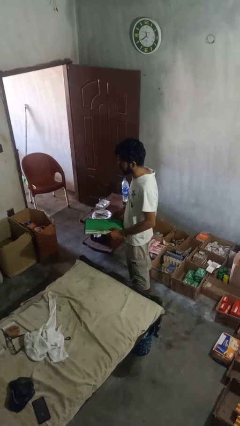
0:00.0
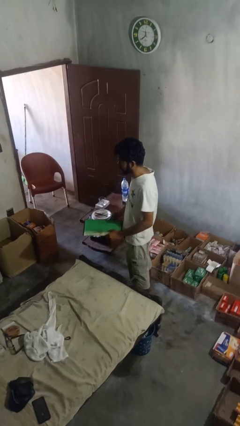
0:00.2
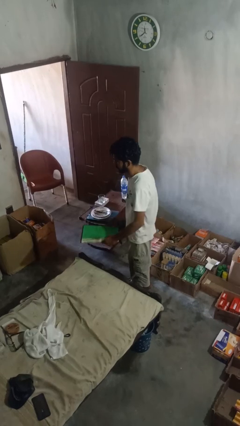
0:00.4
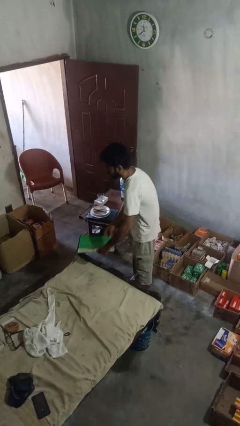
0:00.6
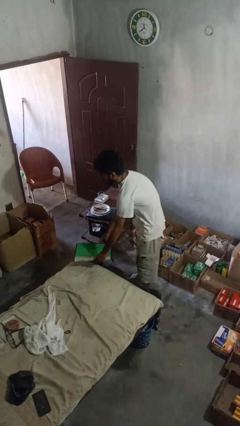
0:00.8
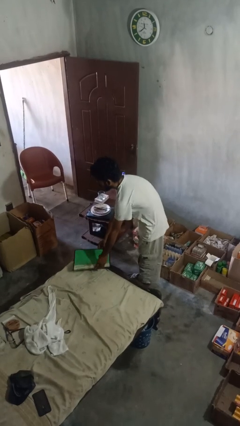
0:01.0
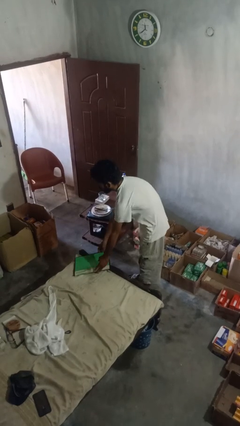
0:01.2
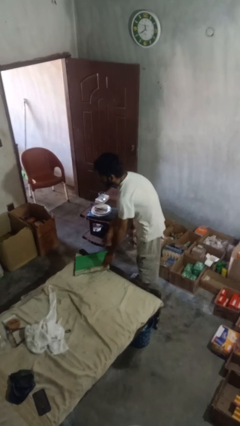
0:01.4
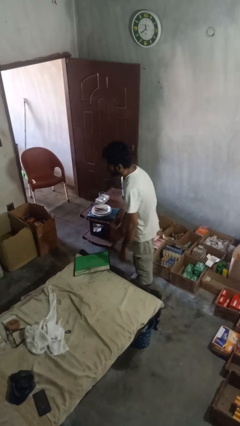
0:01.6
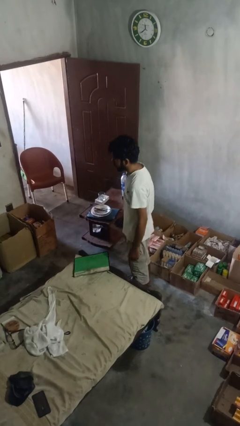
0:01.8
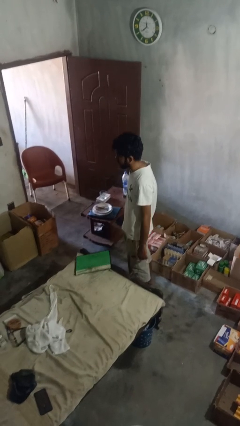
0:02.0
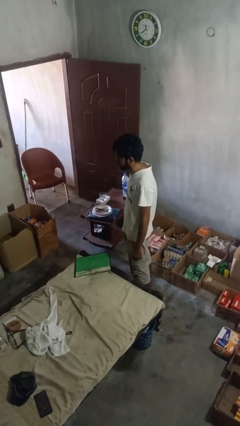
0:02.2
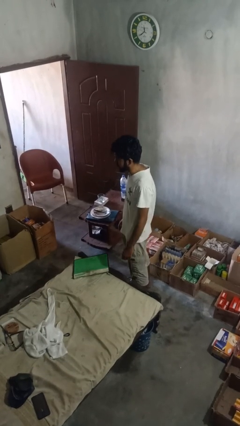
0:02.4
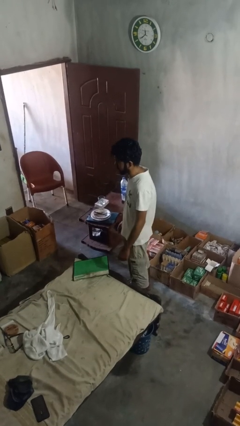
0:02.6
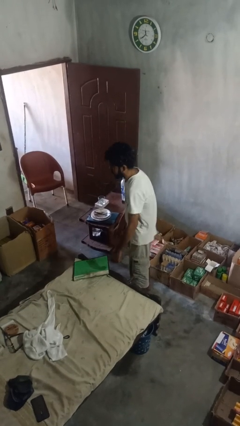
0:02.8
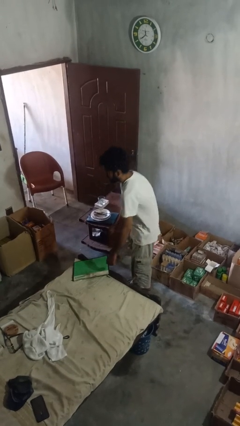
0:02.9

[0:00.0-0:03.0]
person picks up object from bed

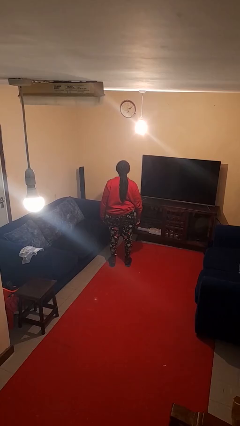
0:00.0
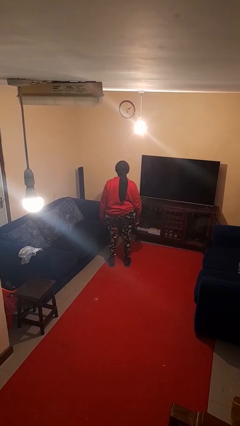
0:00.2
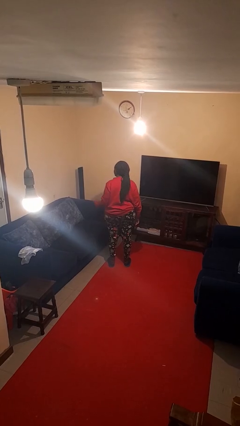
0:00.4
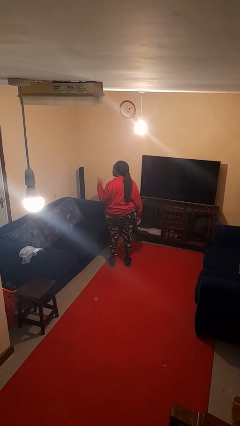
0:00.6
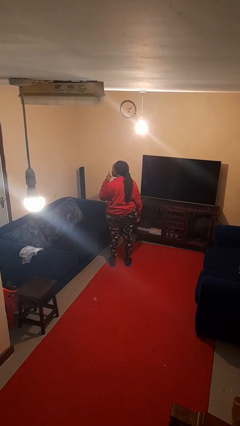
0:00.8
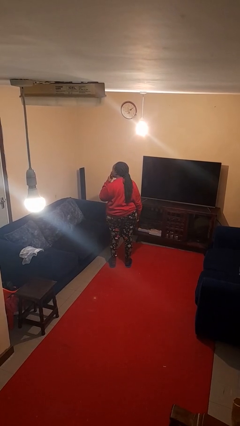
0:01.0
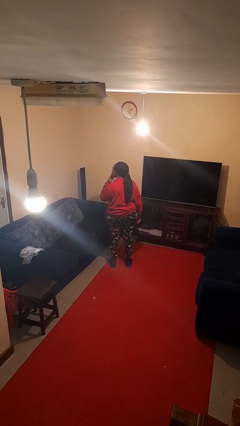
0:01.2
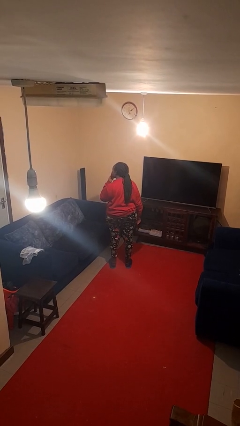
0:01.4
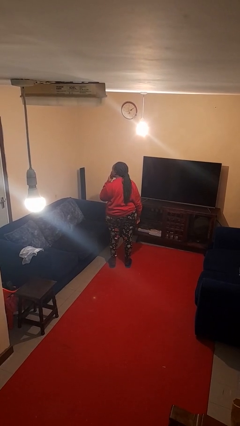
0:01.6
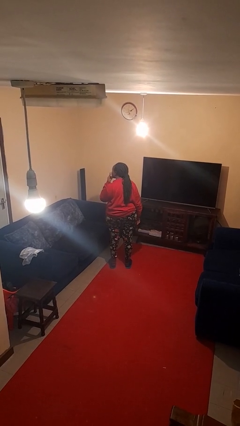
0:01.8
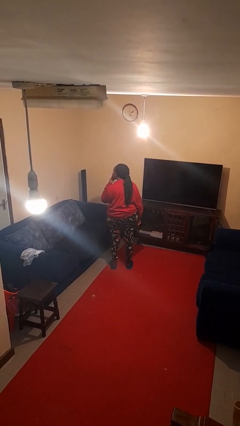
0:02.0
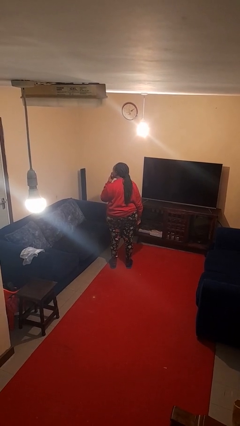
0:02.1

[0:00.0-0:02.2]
person gestures be quiet

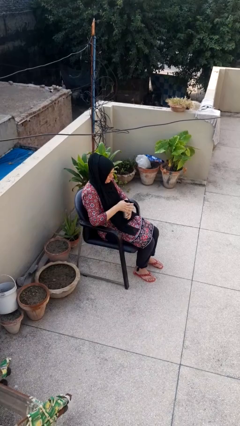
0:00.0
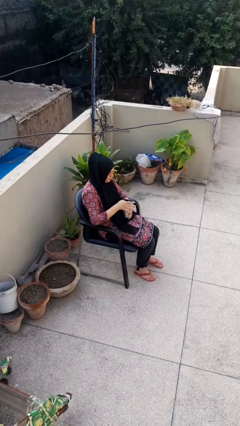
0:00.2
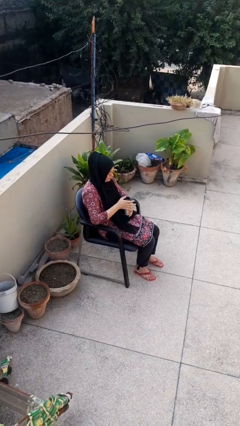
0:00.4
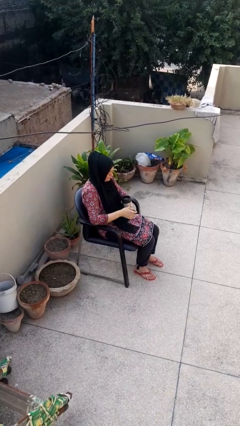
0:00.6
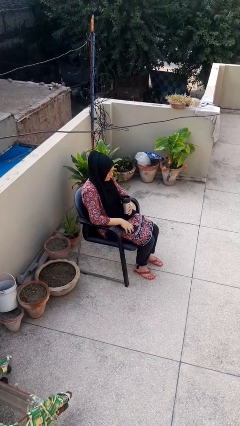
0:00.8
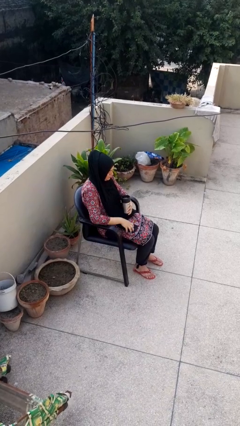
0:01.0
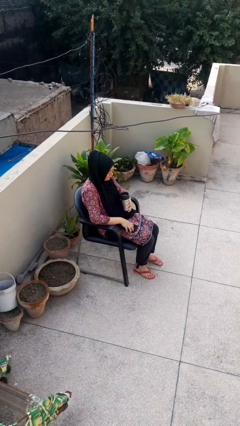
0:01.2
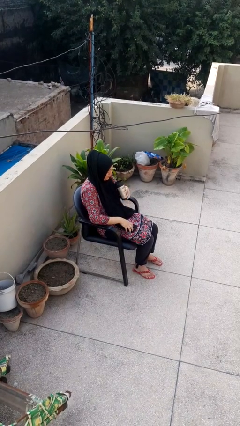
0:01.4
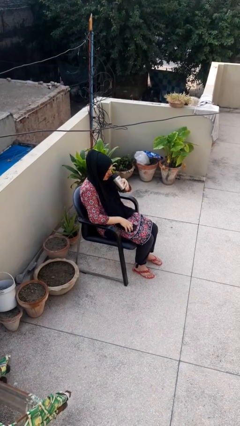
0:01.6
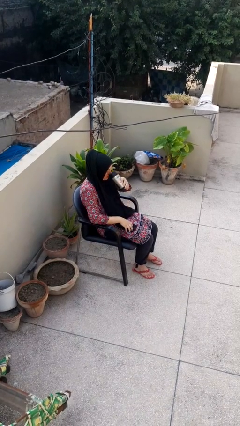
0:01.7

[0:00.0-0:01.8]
person opens beverage can

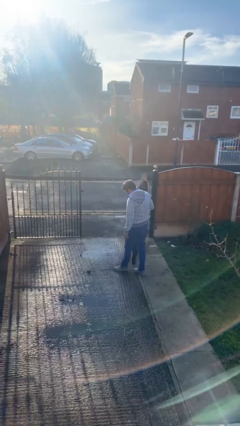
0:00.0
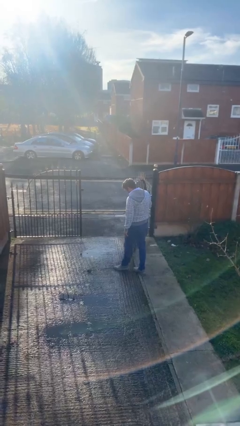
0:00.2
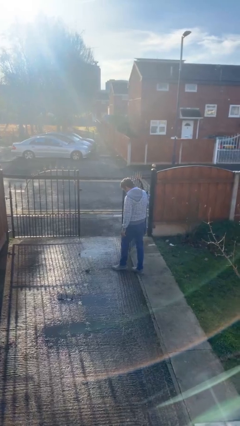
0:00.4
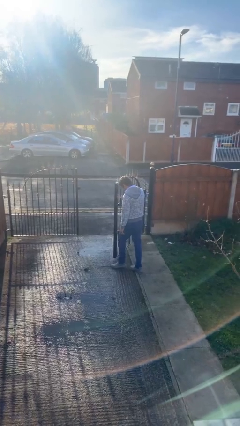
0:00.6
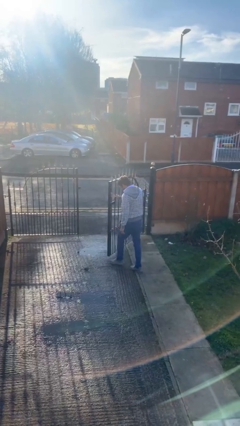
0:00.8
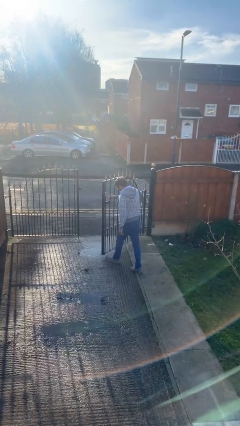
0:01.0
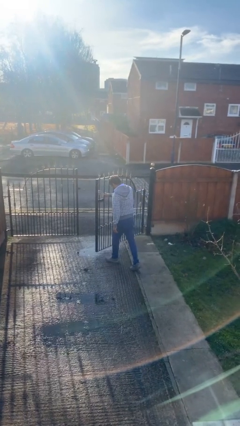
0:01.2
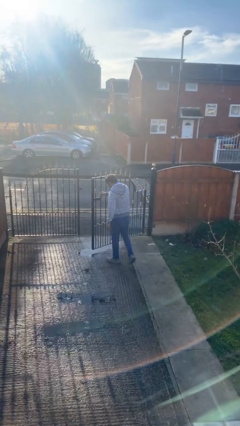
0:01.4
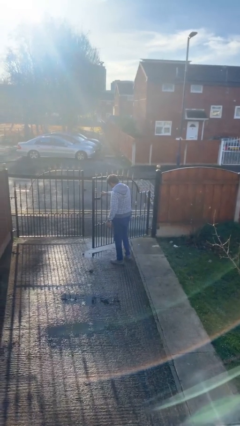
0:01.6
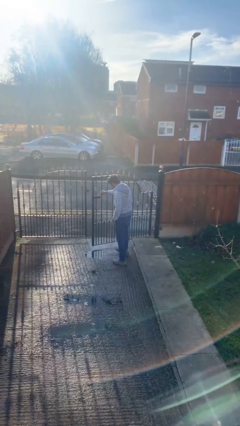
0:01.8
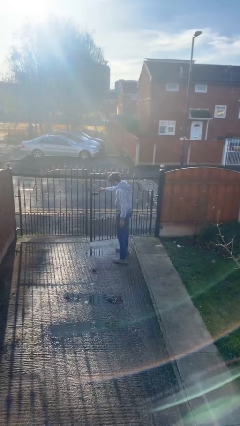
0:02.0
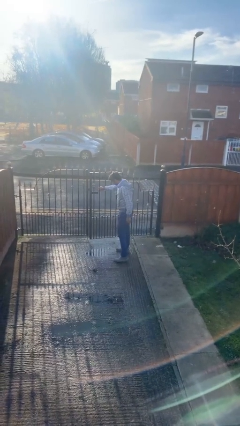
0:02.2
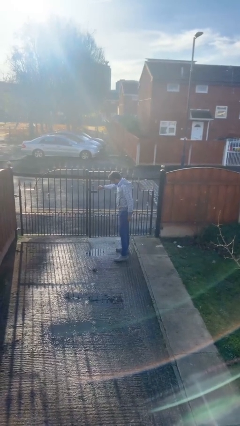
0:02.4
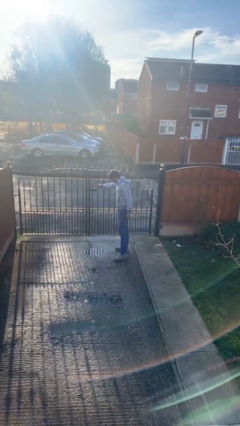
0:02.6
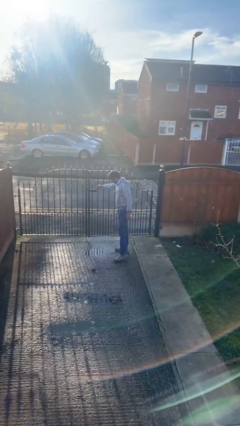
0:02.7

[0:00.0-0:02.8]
person closes facility door

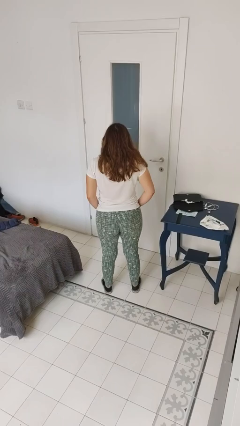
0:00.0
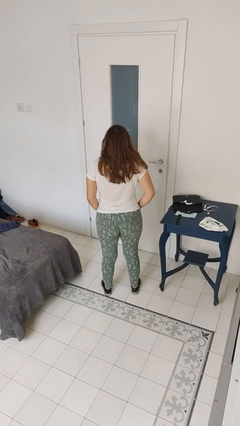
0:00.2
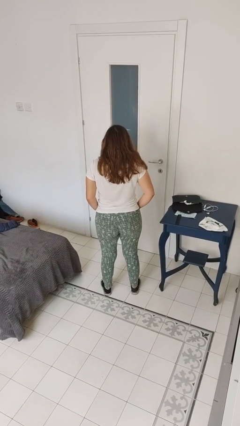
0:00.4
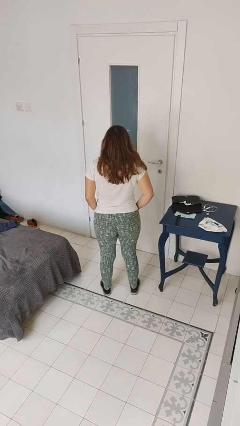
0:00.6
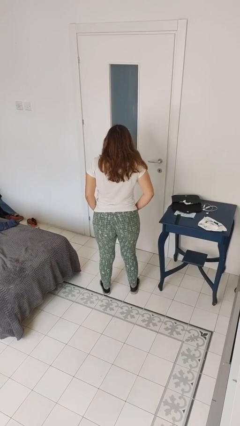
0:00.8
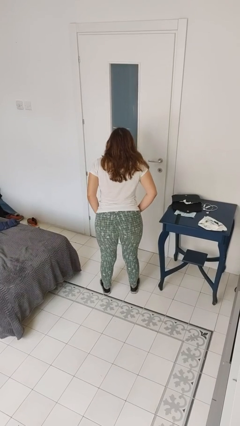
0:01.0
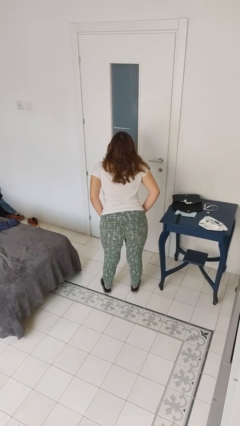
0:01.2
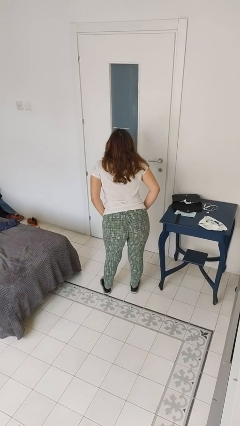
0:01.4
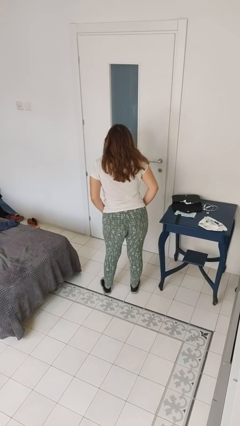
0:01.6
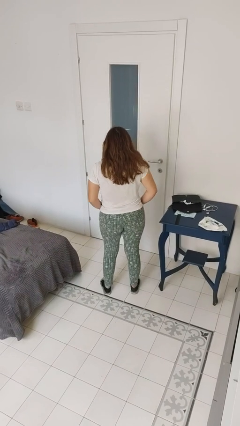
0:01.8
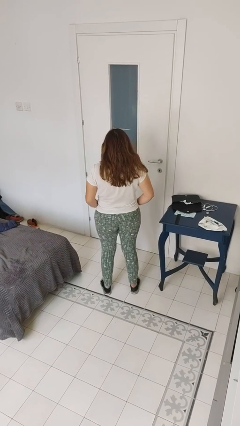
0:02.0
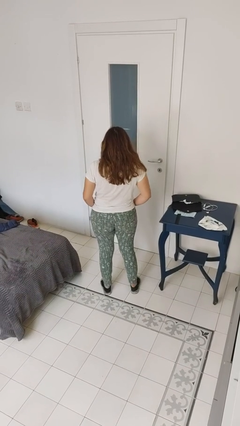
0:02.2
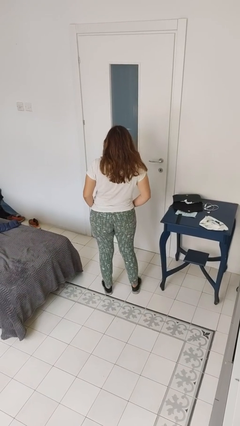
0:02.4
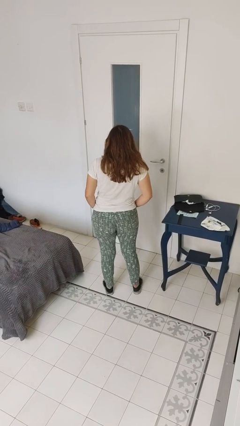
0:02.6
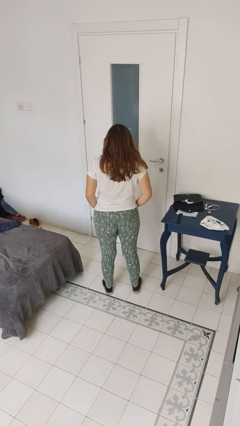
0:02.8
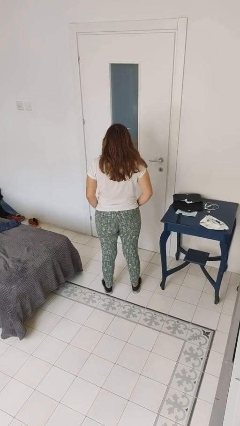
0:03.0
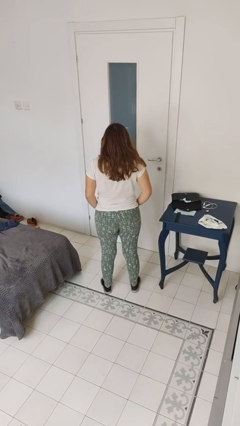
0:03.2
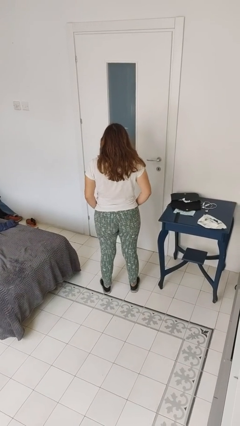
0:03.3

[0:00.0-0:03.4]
person wiggles hips

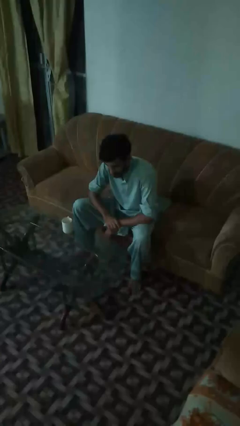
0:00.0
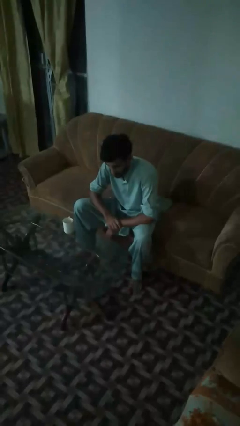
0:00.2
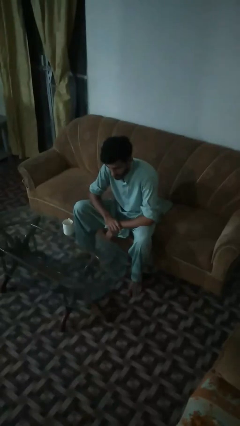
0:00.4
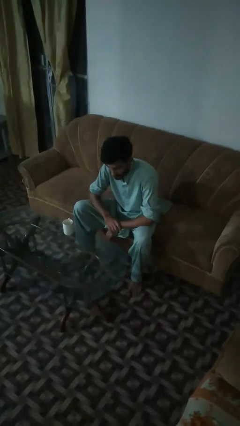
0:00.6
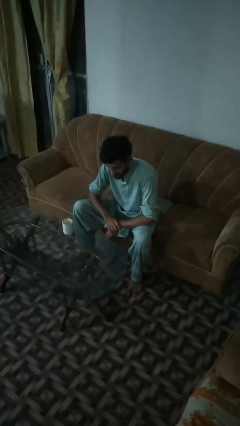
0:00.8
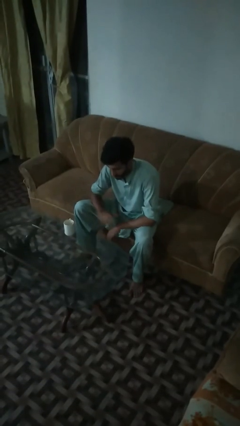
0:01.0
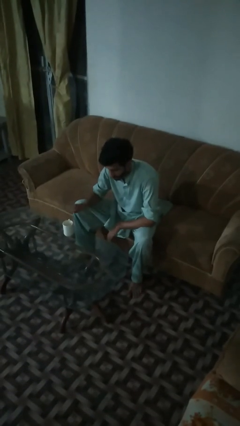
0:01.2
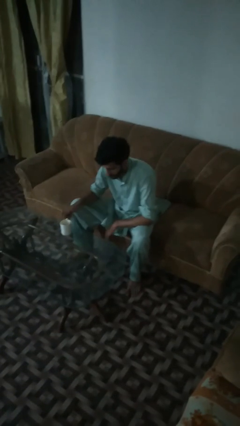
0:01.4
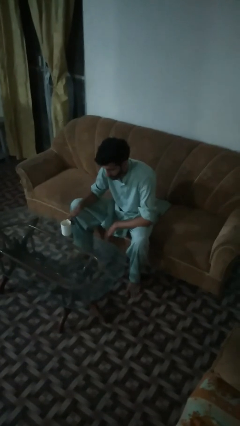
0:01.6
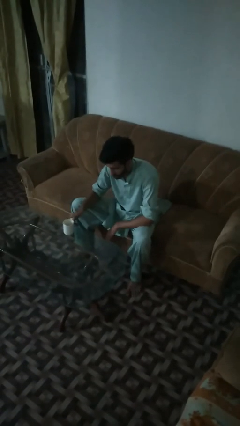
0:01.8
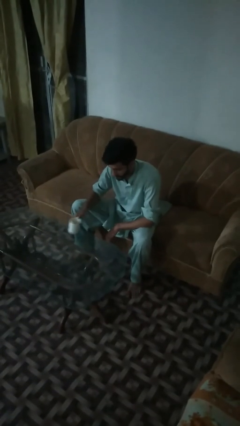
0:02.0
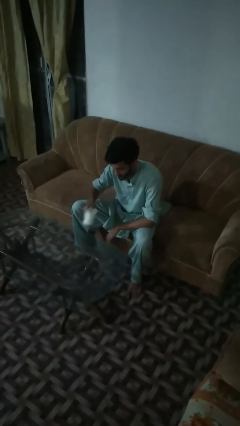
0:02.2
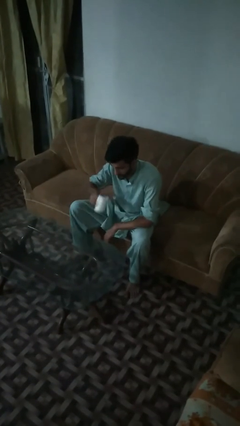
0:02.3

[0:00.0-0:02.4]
person picks up object from table

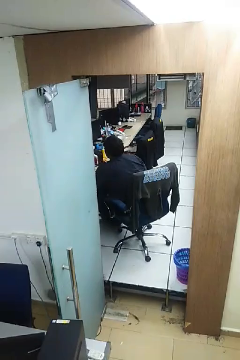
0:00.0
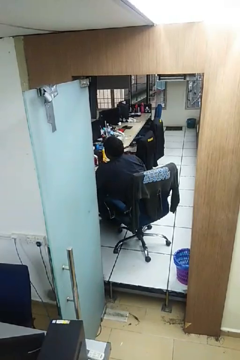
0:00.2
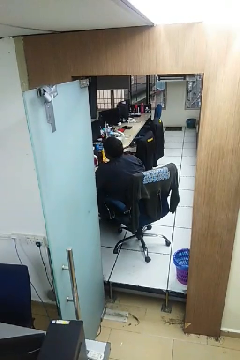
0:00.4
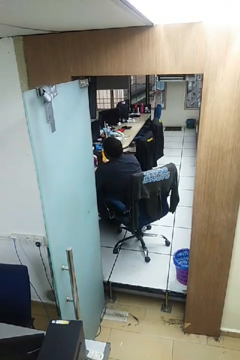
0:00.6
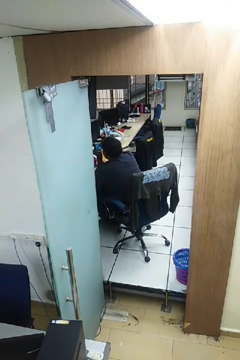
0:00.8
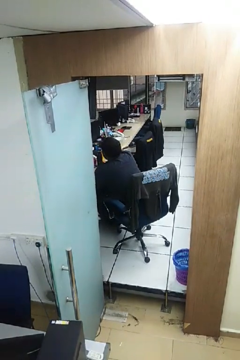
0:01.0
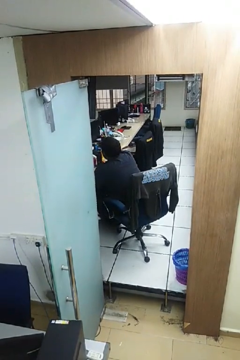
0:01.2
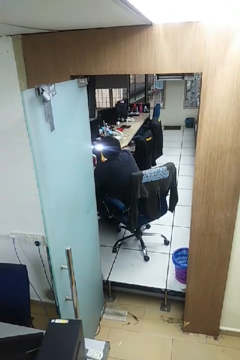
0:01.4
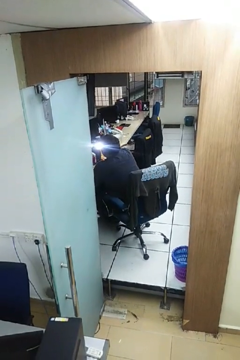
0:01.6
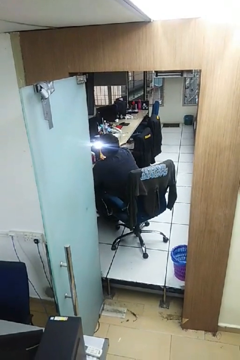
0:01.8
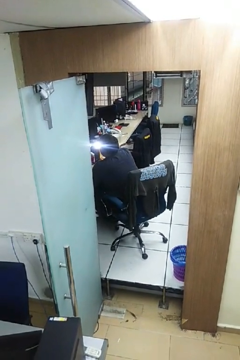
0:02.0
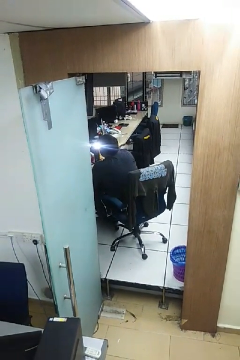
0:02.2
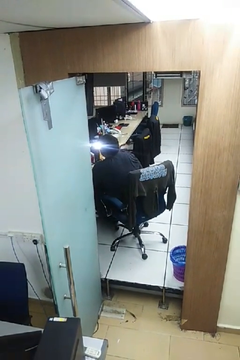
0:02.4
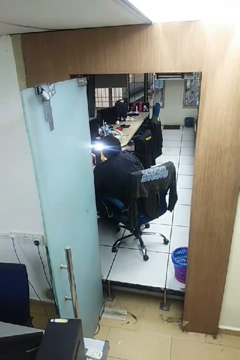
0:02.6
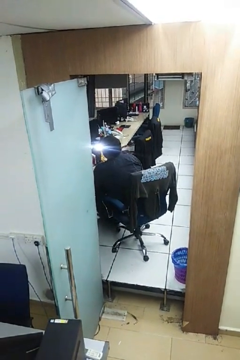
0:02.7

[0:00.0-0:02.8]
person turns on lamp
